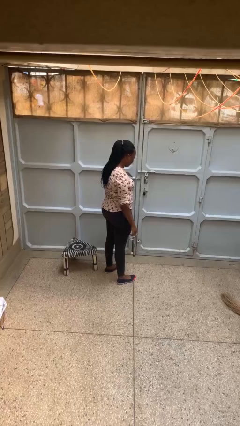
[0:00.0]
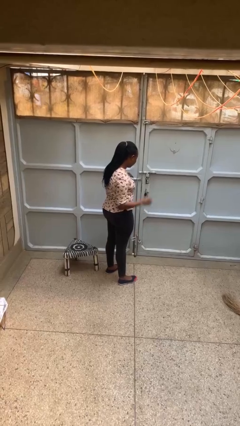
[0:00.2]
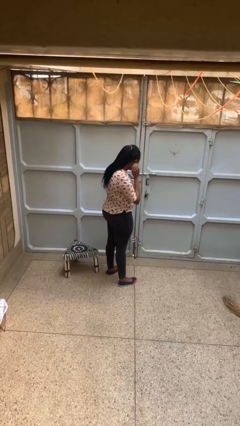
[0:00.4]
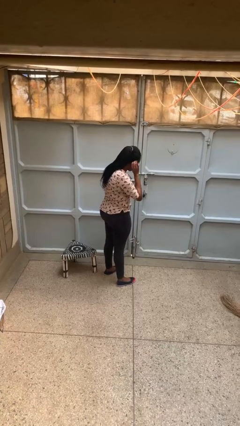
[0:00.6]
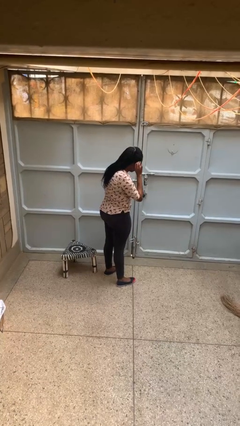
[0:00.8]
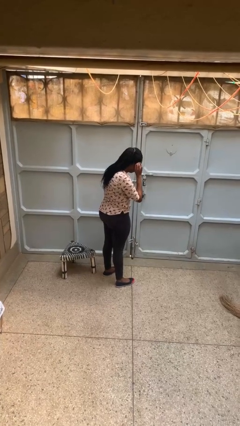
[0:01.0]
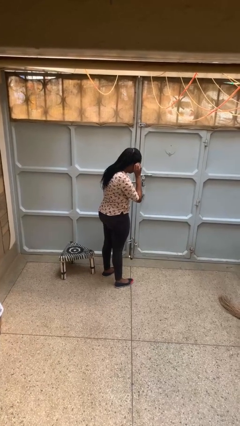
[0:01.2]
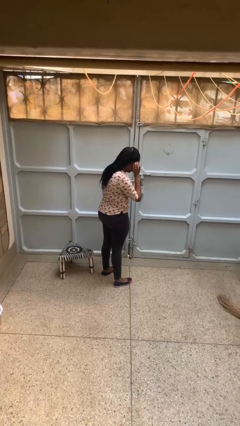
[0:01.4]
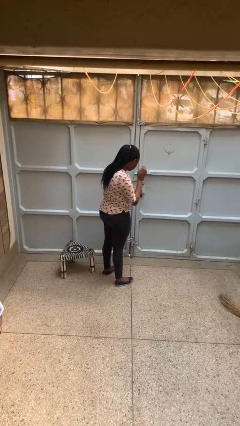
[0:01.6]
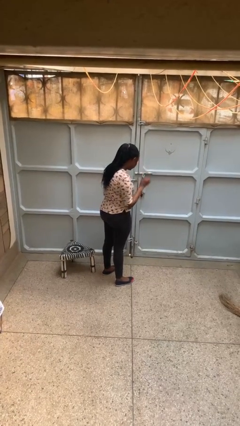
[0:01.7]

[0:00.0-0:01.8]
person gestures listen closely

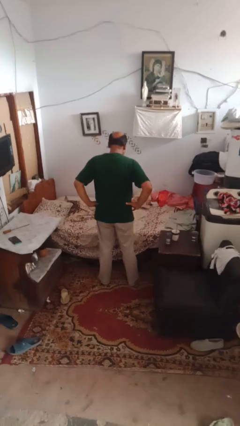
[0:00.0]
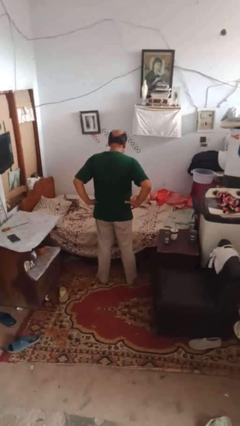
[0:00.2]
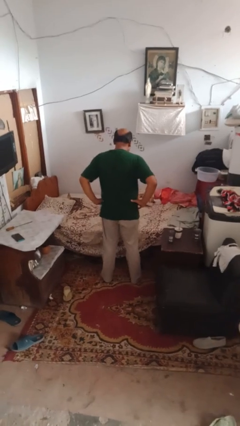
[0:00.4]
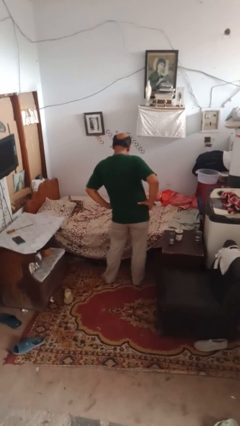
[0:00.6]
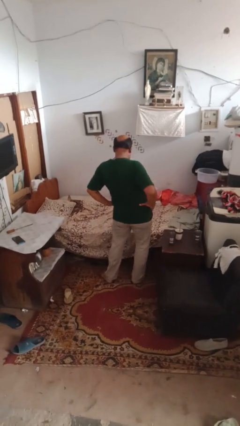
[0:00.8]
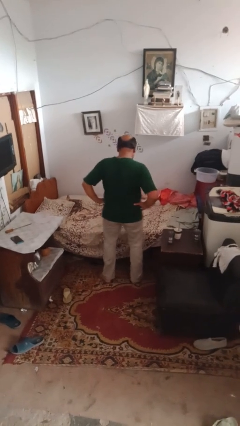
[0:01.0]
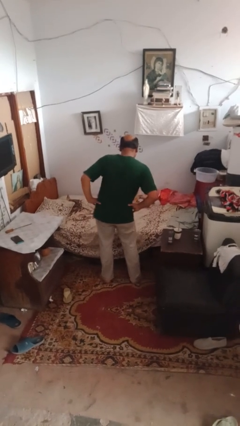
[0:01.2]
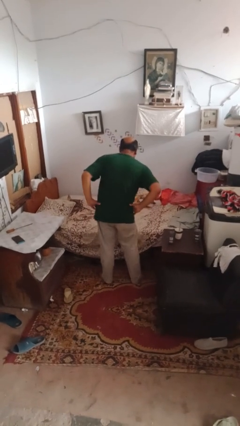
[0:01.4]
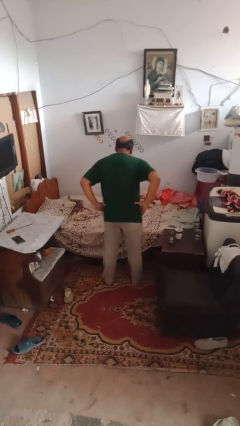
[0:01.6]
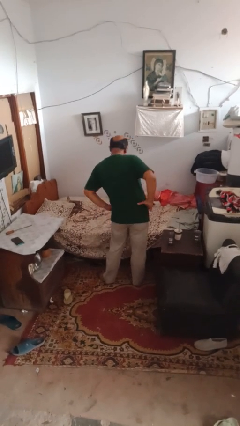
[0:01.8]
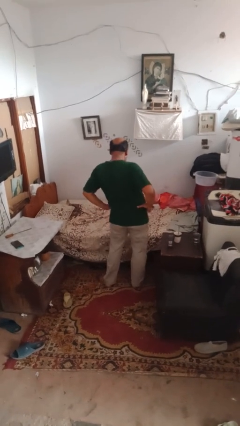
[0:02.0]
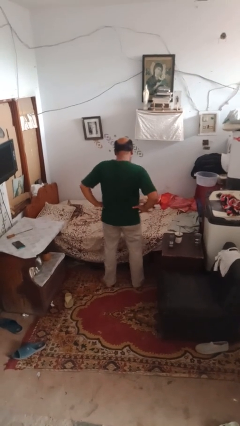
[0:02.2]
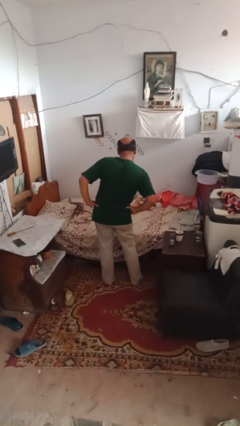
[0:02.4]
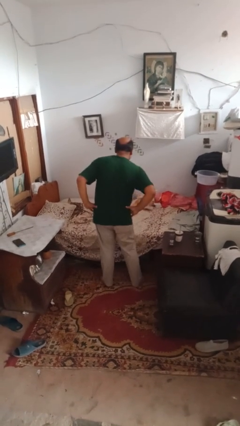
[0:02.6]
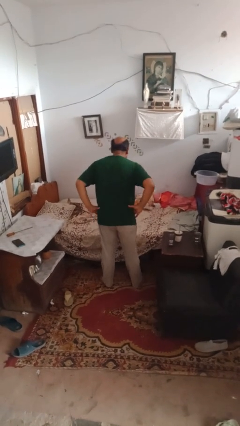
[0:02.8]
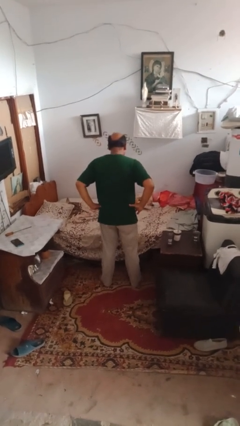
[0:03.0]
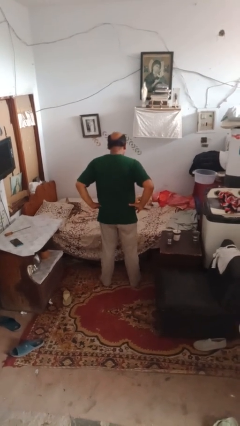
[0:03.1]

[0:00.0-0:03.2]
person wiggles hips

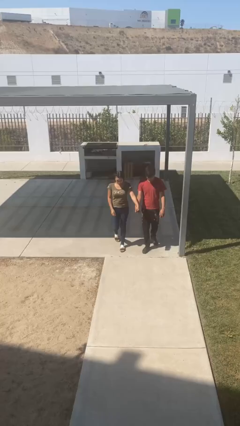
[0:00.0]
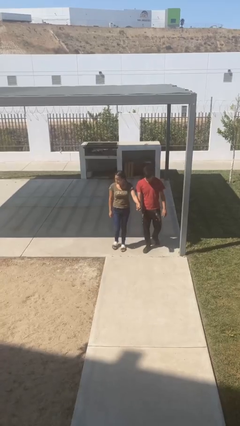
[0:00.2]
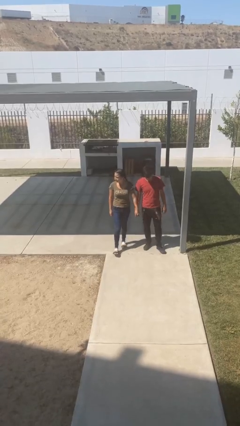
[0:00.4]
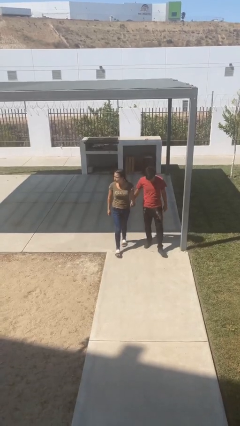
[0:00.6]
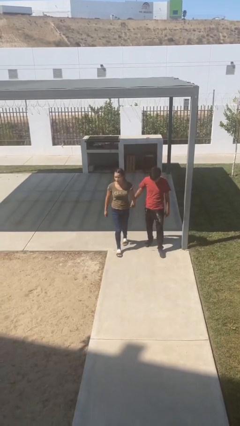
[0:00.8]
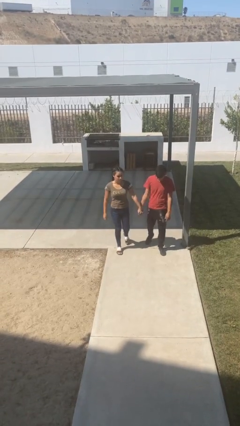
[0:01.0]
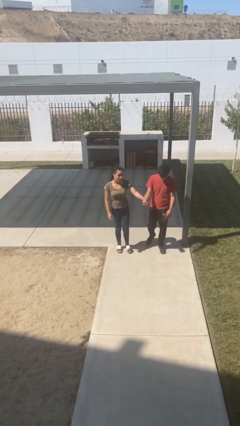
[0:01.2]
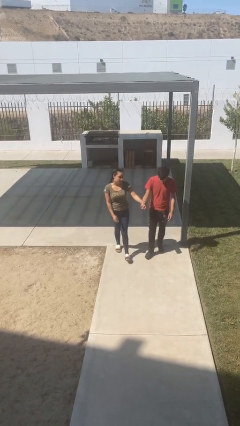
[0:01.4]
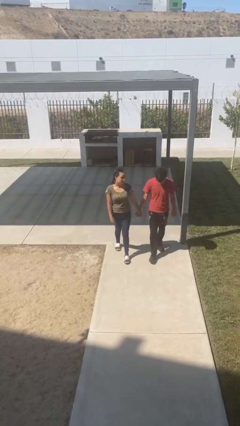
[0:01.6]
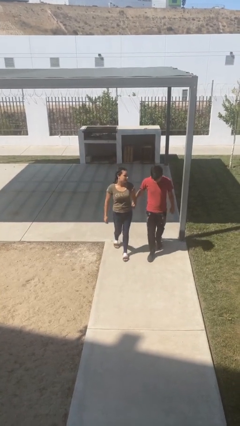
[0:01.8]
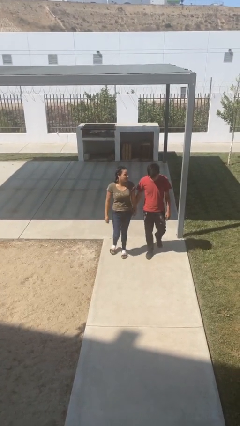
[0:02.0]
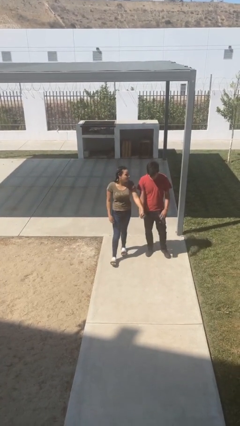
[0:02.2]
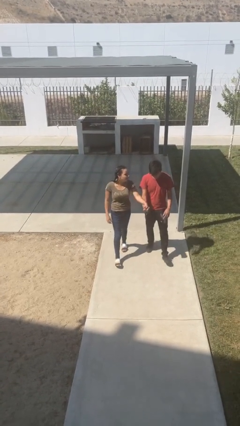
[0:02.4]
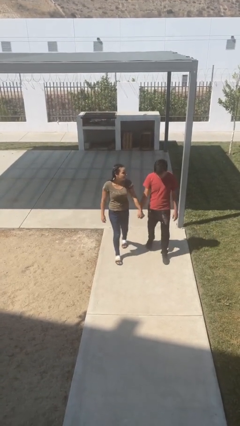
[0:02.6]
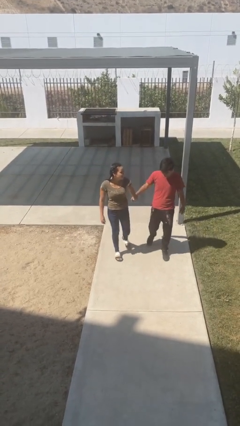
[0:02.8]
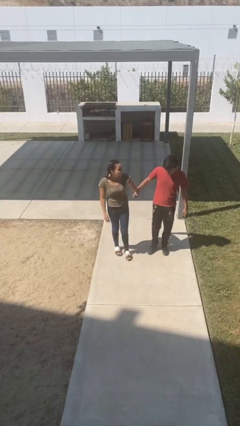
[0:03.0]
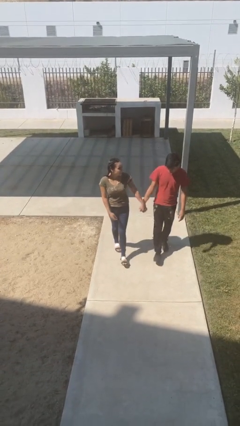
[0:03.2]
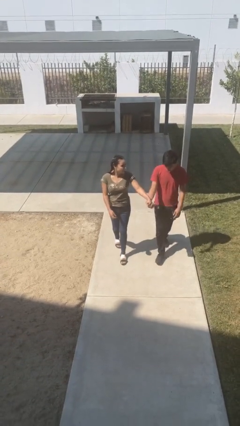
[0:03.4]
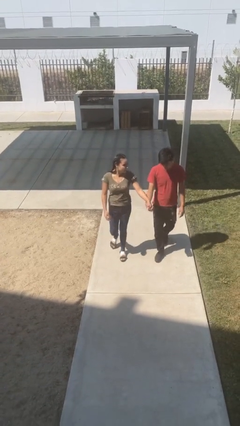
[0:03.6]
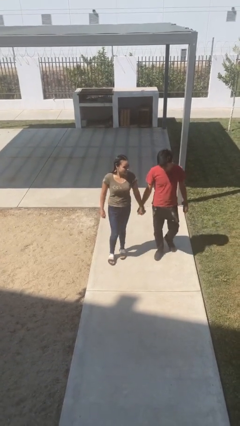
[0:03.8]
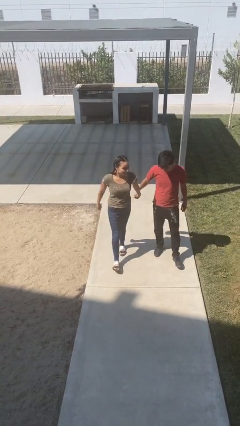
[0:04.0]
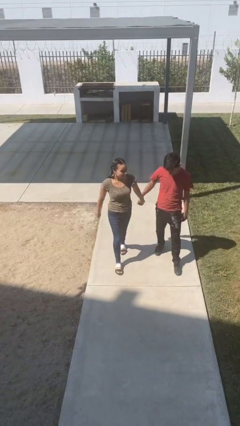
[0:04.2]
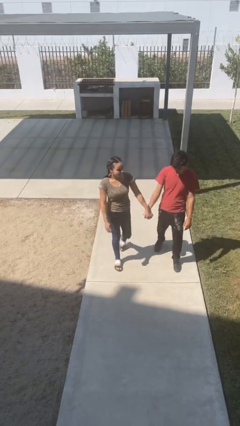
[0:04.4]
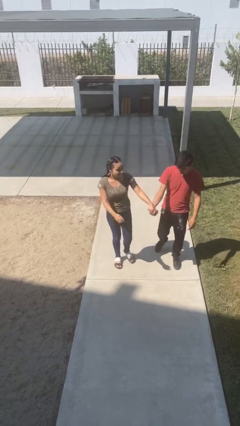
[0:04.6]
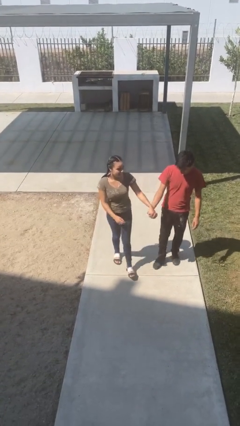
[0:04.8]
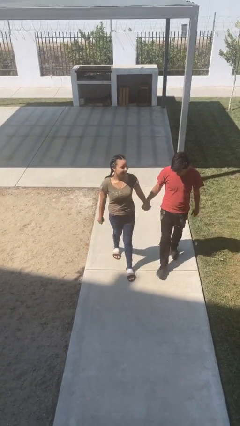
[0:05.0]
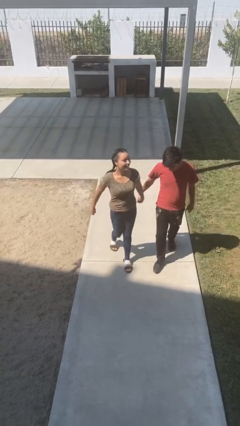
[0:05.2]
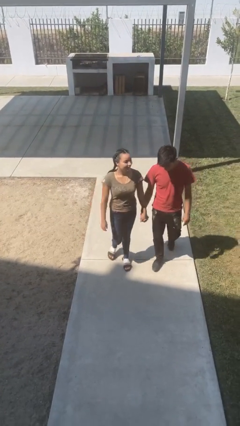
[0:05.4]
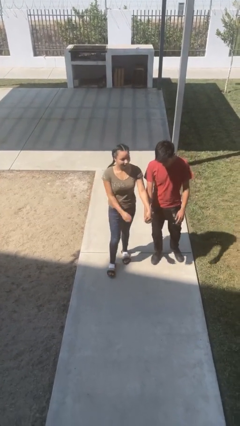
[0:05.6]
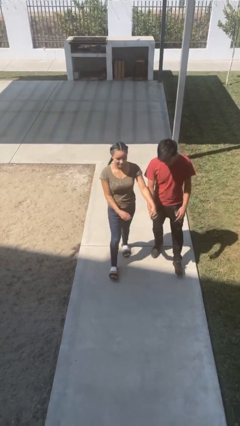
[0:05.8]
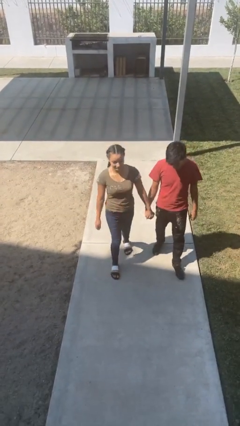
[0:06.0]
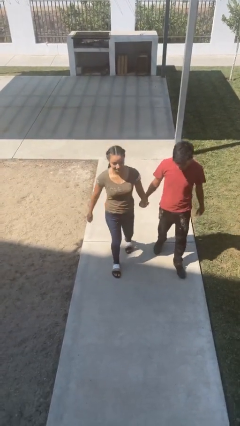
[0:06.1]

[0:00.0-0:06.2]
person holds hand

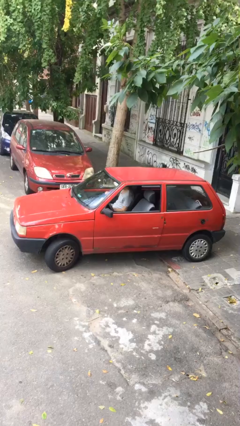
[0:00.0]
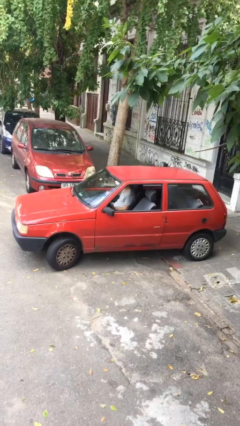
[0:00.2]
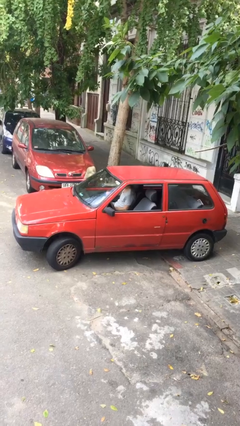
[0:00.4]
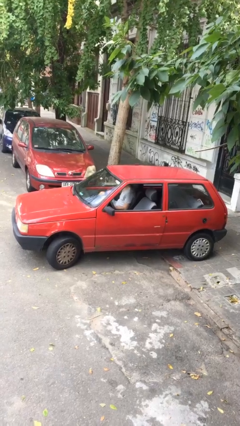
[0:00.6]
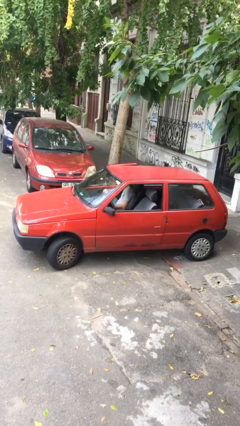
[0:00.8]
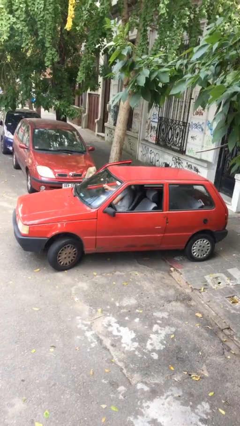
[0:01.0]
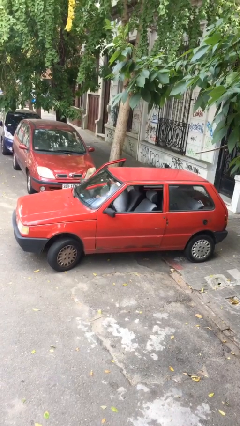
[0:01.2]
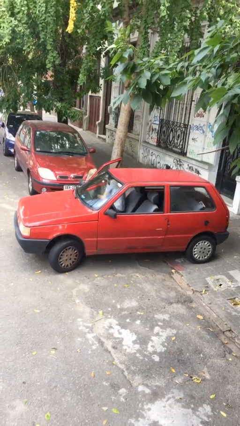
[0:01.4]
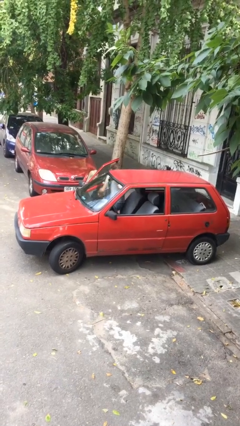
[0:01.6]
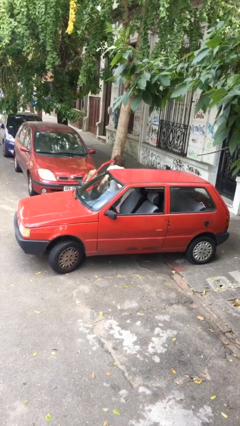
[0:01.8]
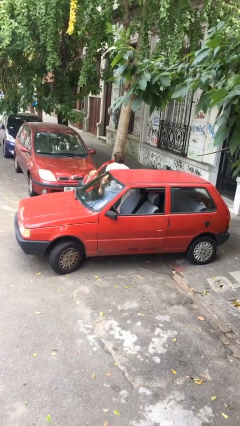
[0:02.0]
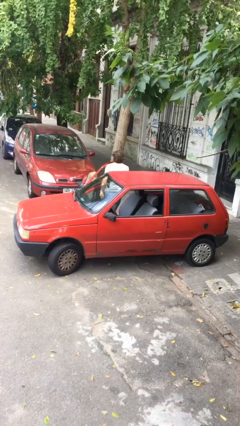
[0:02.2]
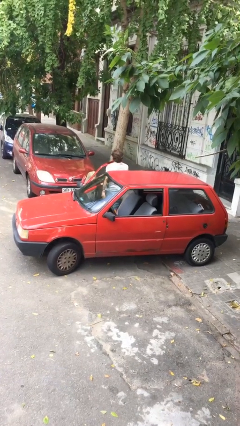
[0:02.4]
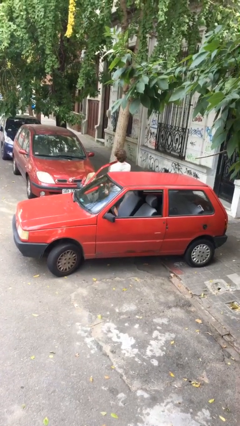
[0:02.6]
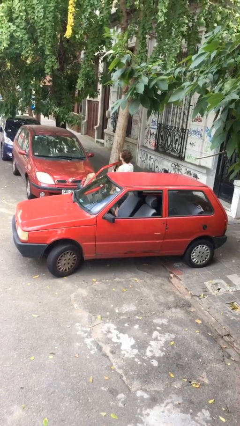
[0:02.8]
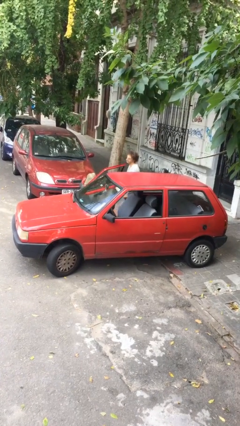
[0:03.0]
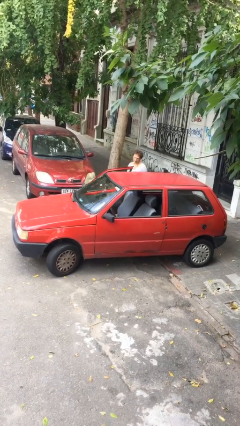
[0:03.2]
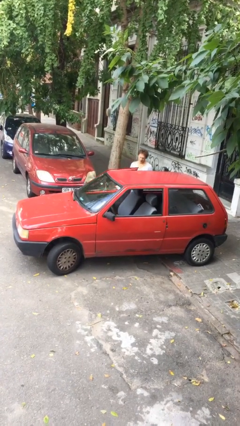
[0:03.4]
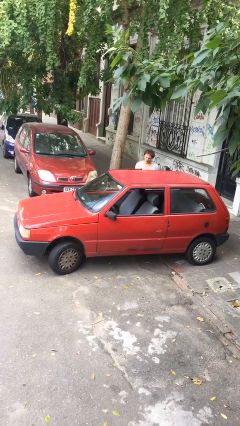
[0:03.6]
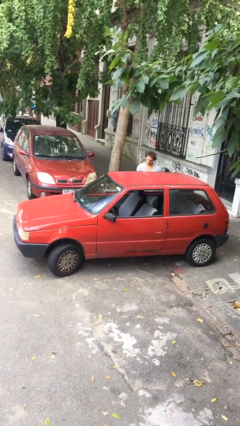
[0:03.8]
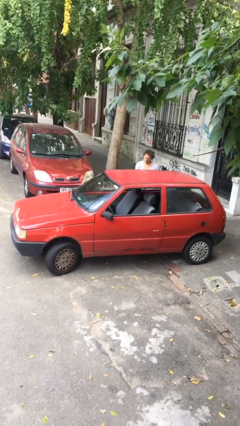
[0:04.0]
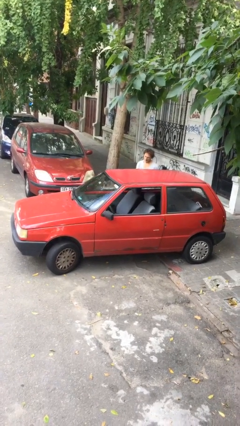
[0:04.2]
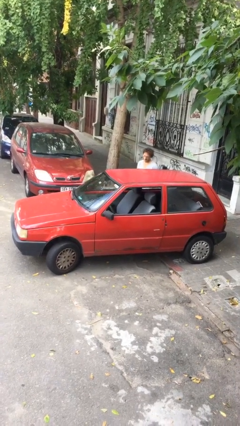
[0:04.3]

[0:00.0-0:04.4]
car drops off person

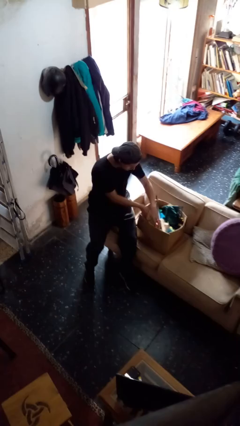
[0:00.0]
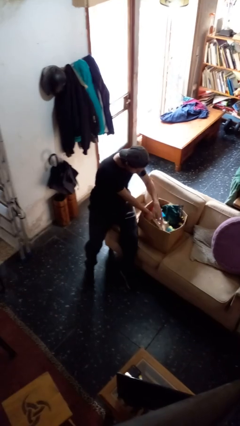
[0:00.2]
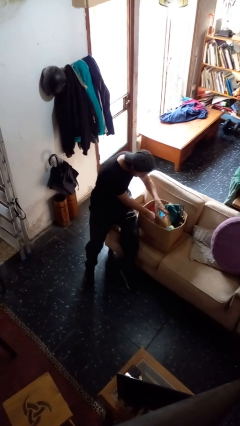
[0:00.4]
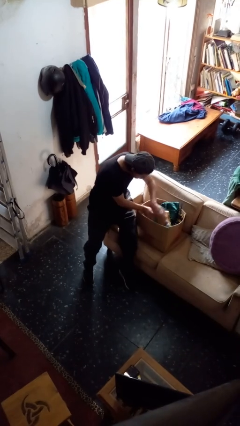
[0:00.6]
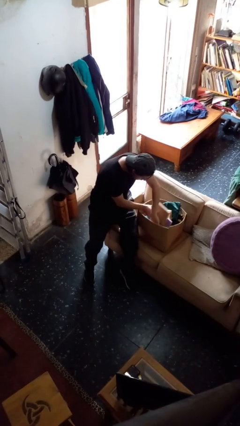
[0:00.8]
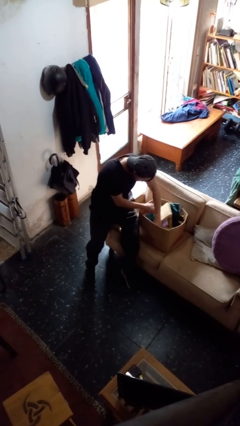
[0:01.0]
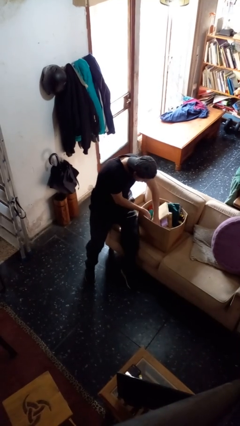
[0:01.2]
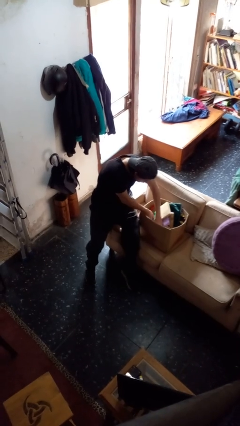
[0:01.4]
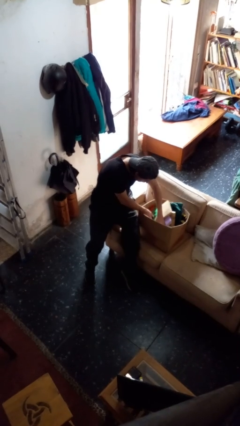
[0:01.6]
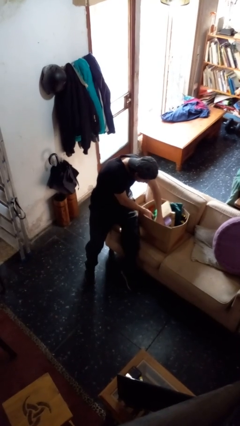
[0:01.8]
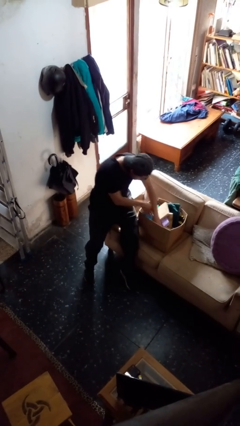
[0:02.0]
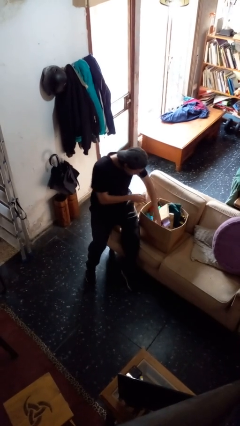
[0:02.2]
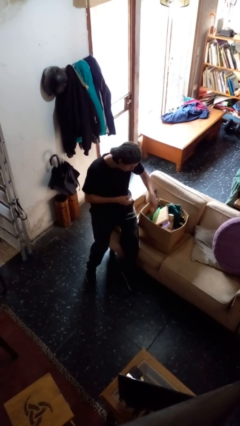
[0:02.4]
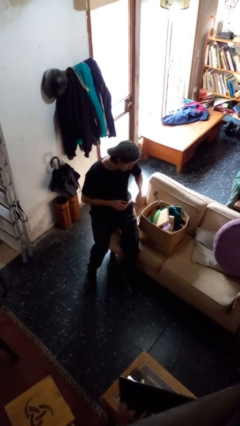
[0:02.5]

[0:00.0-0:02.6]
person searches in box
